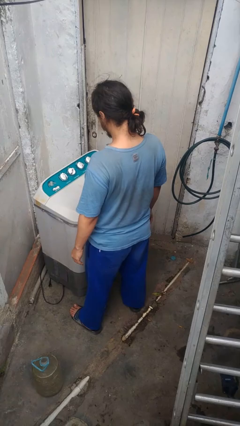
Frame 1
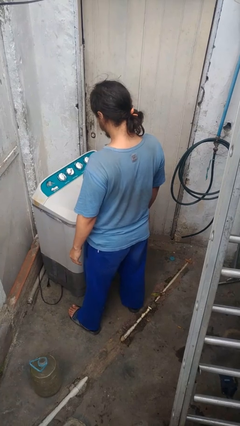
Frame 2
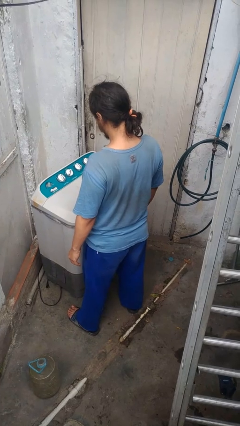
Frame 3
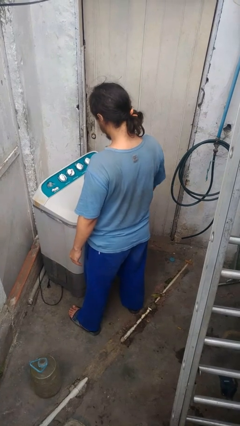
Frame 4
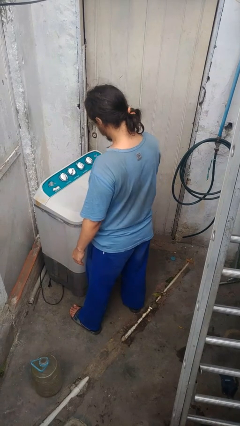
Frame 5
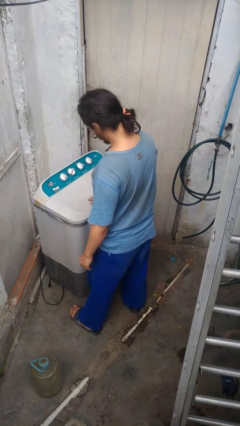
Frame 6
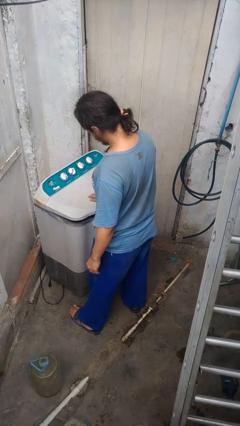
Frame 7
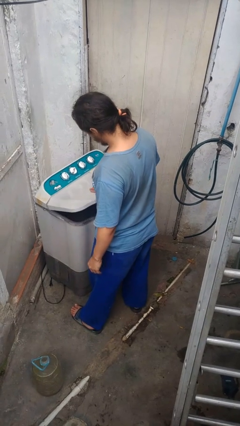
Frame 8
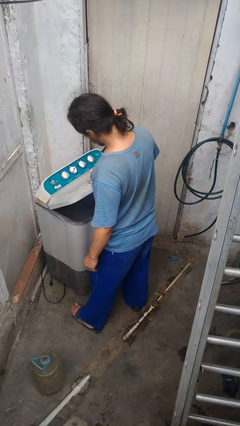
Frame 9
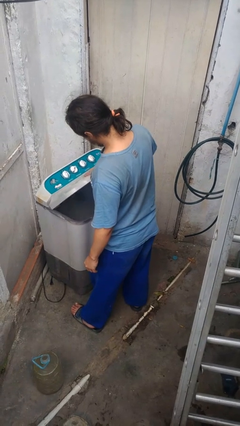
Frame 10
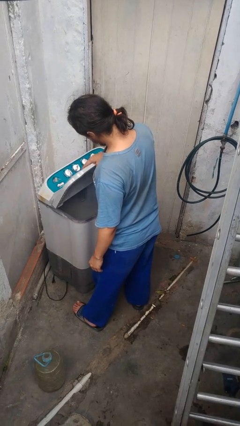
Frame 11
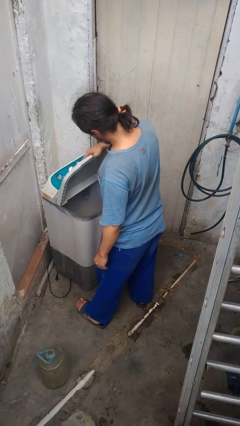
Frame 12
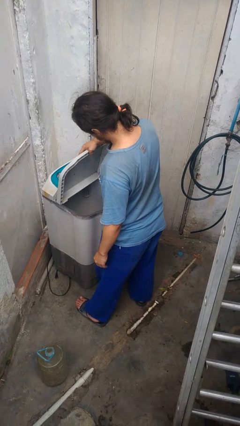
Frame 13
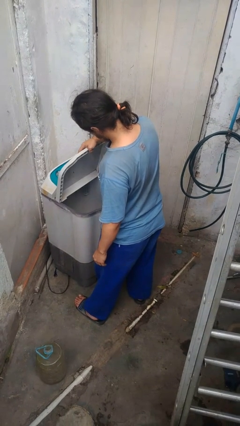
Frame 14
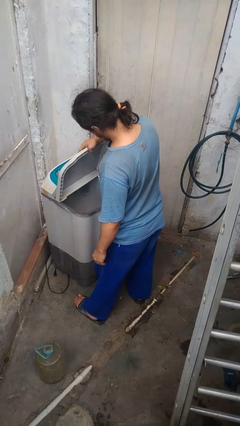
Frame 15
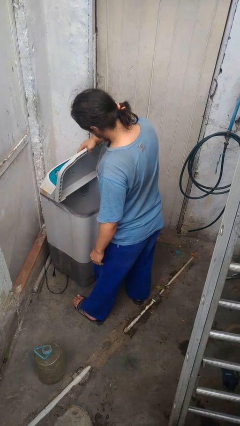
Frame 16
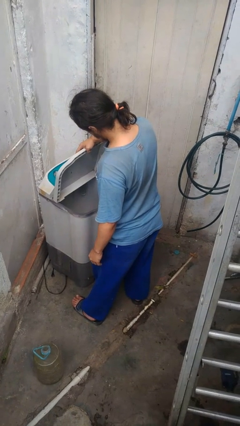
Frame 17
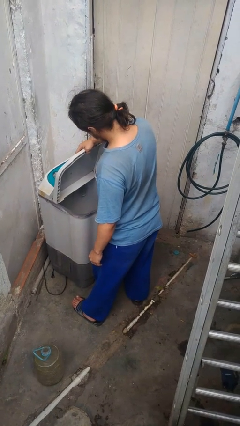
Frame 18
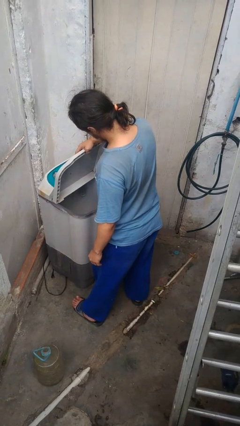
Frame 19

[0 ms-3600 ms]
person opens clothes washer

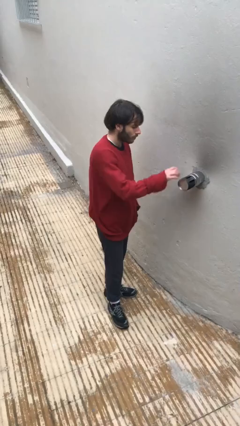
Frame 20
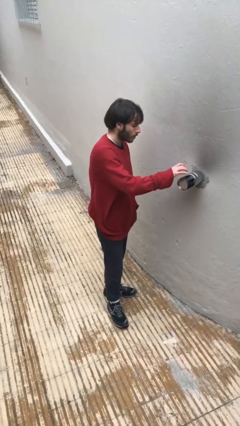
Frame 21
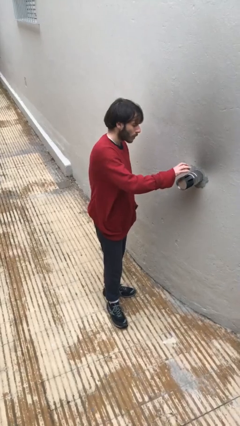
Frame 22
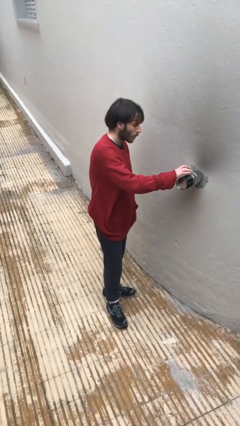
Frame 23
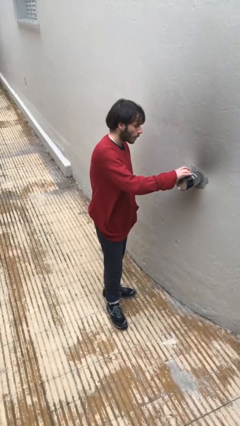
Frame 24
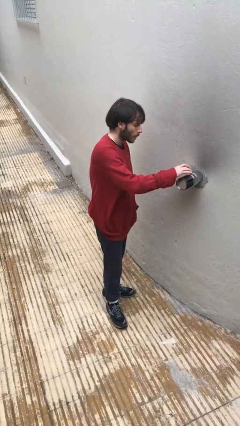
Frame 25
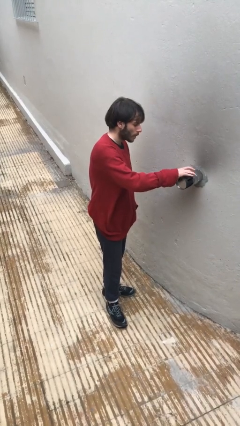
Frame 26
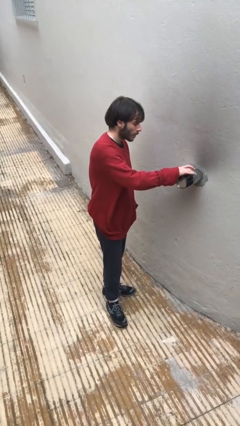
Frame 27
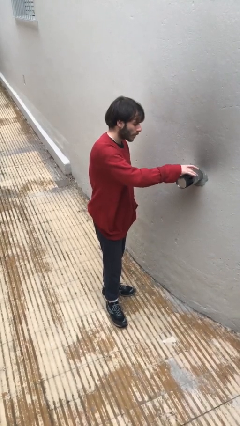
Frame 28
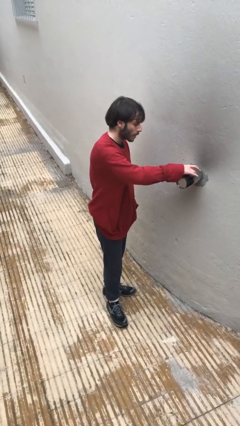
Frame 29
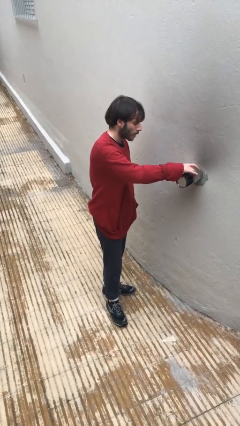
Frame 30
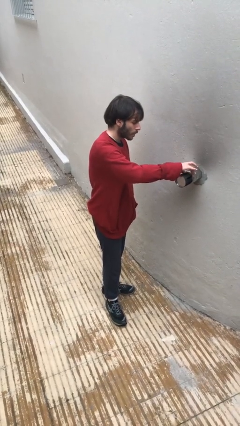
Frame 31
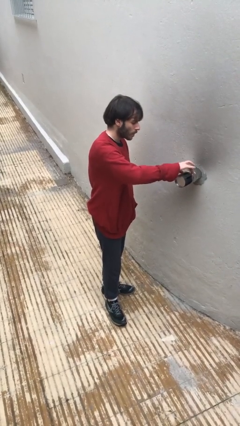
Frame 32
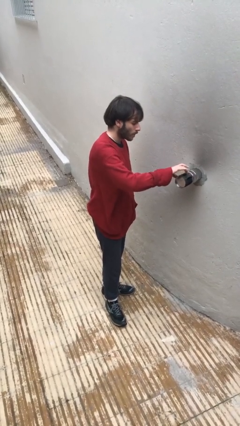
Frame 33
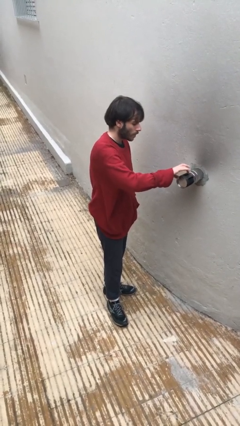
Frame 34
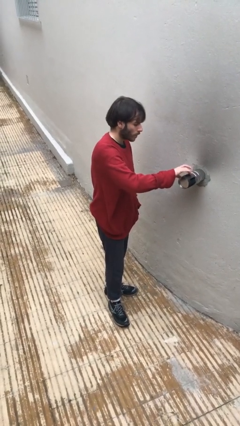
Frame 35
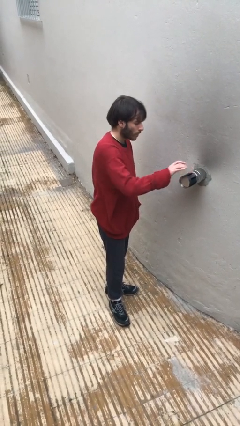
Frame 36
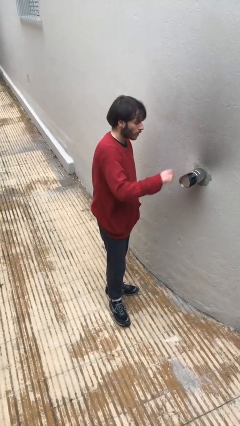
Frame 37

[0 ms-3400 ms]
person taps object with finger

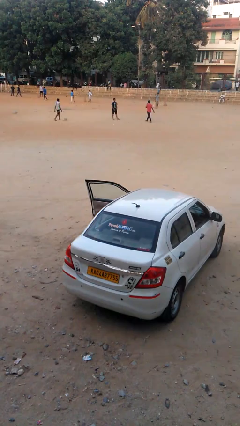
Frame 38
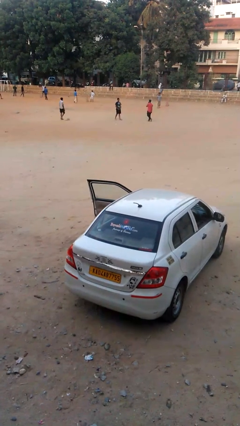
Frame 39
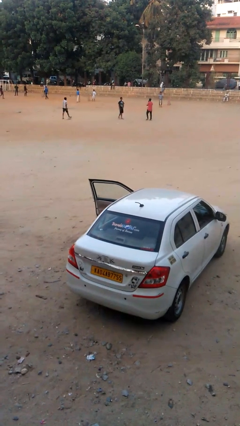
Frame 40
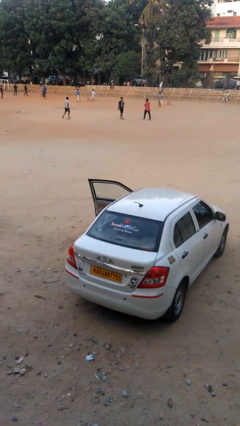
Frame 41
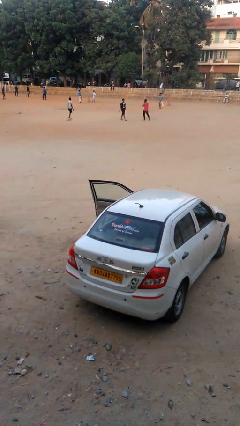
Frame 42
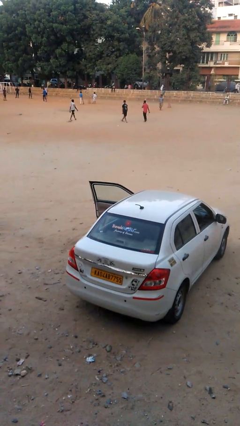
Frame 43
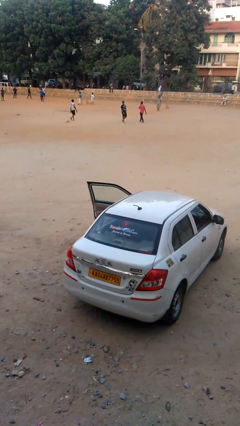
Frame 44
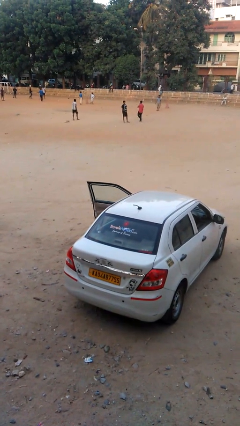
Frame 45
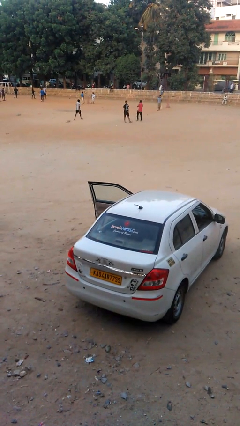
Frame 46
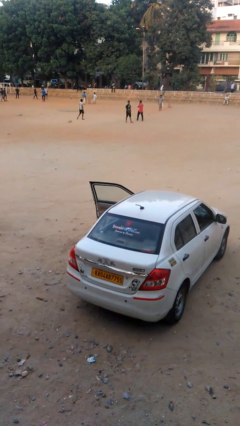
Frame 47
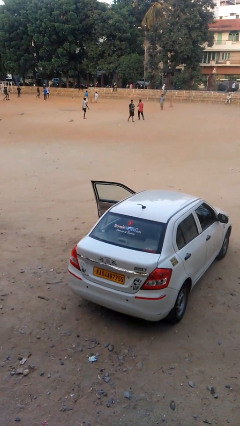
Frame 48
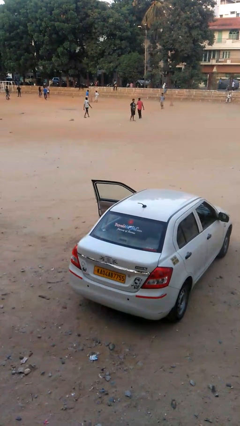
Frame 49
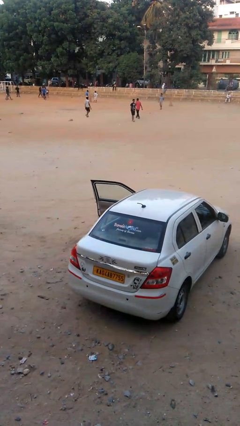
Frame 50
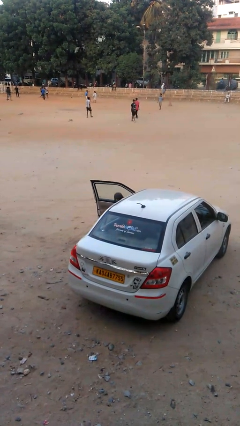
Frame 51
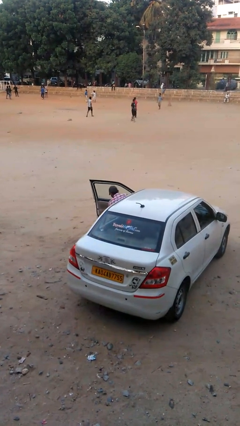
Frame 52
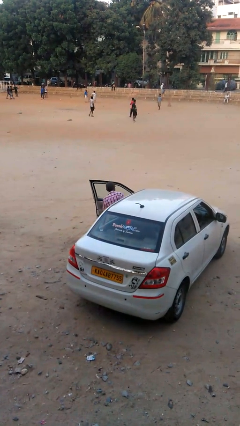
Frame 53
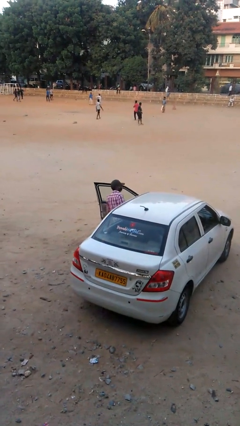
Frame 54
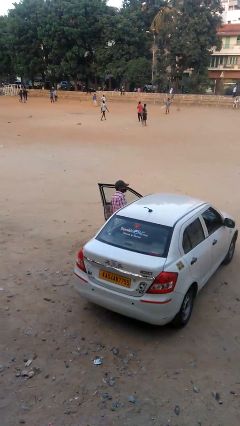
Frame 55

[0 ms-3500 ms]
person exits car

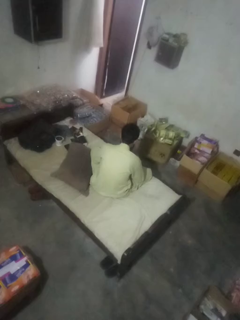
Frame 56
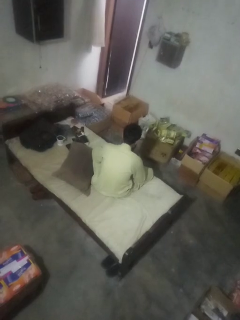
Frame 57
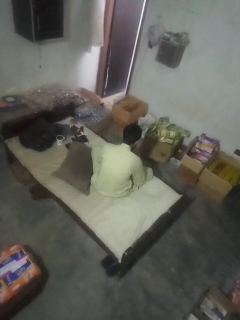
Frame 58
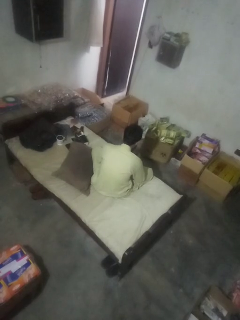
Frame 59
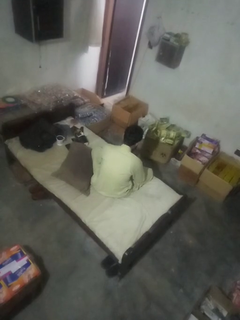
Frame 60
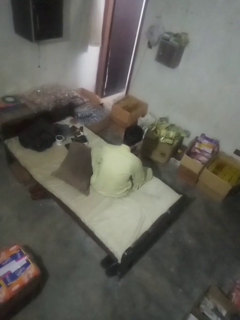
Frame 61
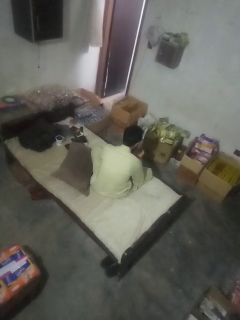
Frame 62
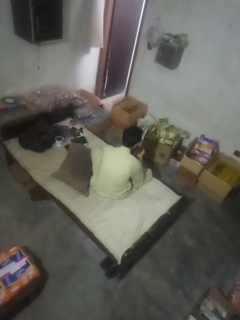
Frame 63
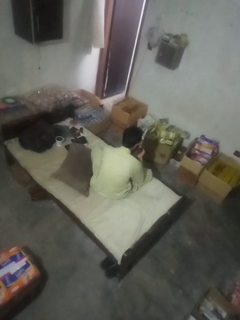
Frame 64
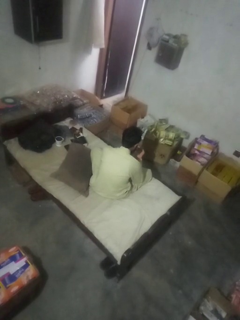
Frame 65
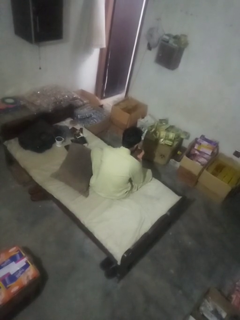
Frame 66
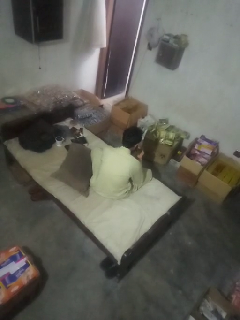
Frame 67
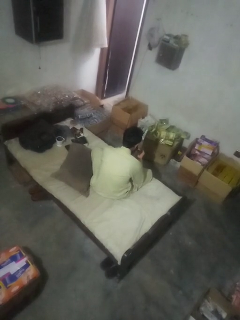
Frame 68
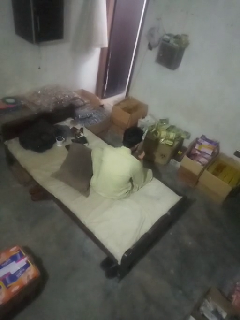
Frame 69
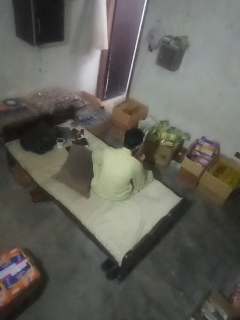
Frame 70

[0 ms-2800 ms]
person paints fingernails

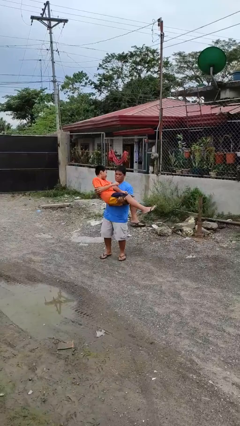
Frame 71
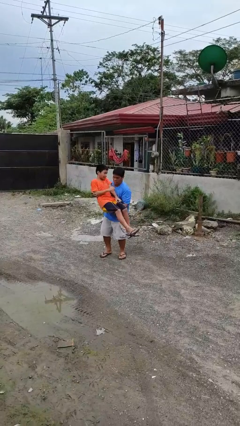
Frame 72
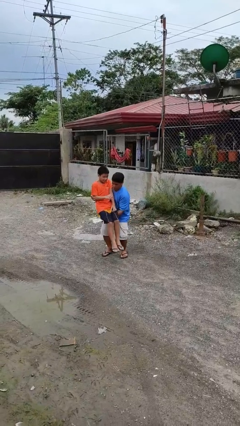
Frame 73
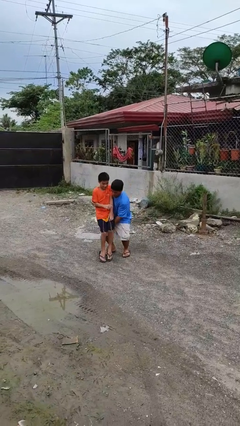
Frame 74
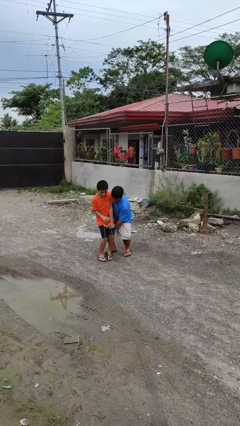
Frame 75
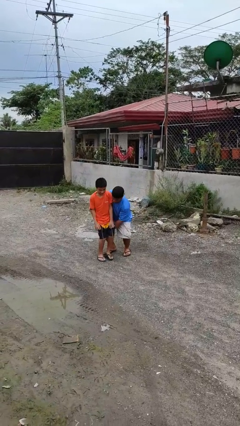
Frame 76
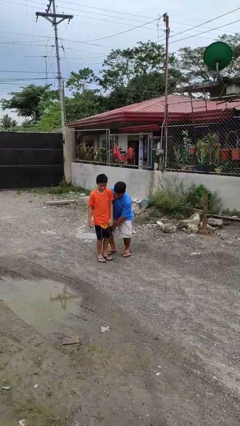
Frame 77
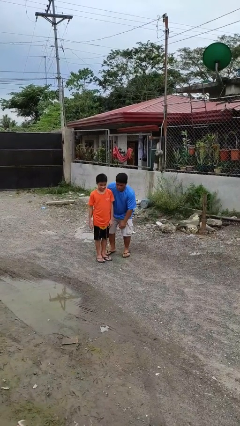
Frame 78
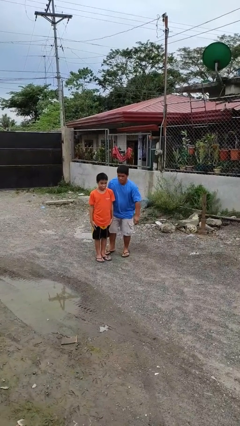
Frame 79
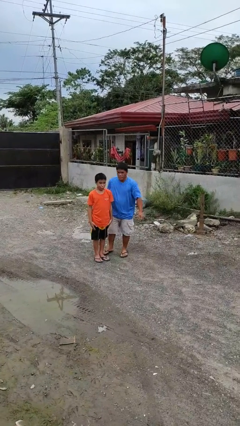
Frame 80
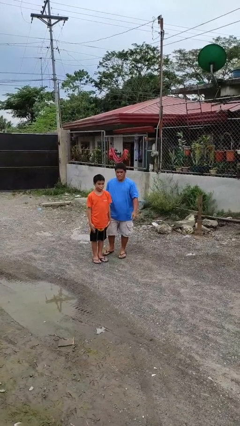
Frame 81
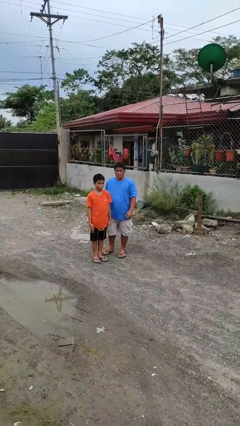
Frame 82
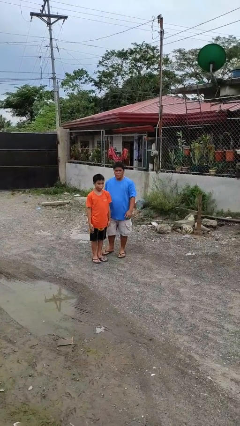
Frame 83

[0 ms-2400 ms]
person puts down person

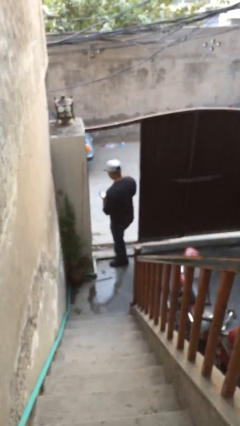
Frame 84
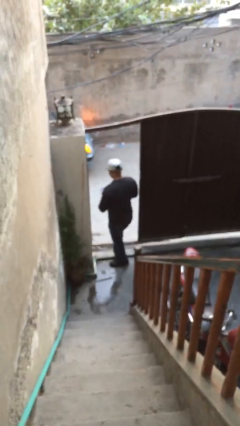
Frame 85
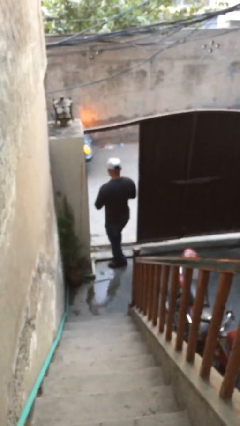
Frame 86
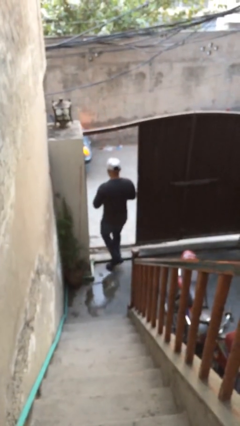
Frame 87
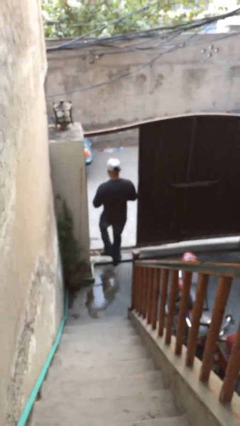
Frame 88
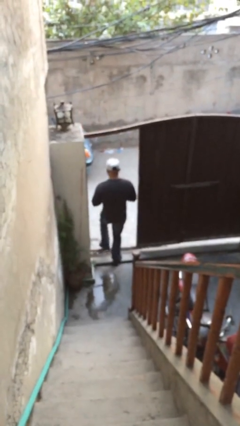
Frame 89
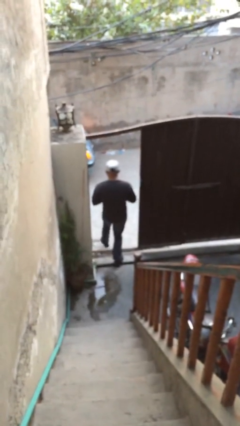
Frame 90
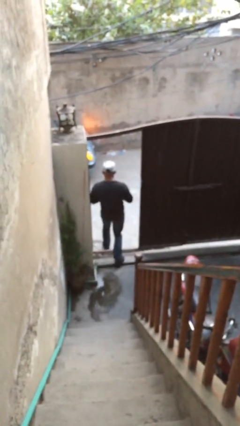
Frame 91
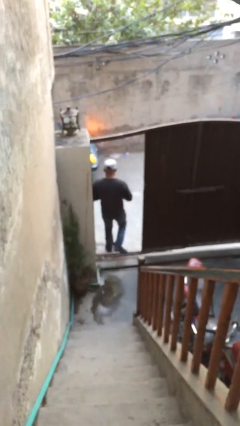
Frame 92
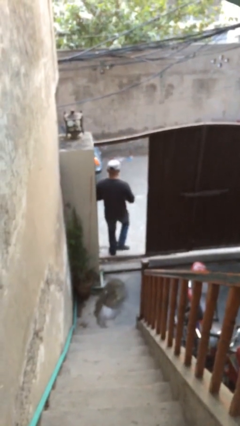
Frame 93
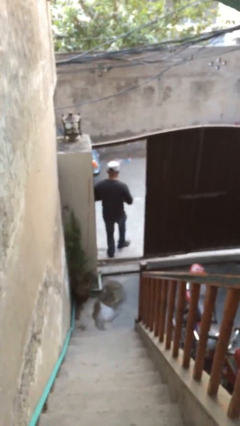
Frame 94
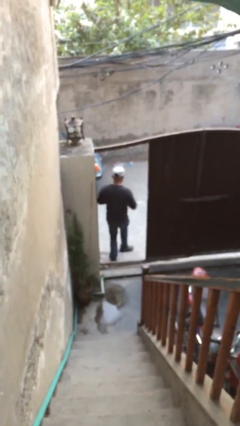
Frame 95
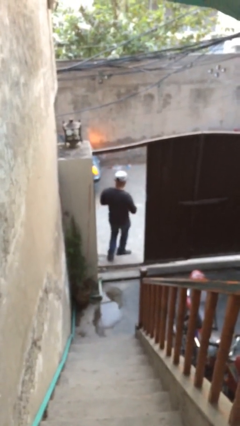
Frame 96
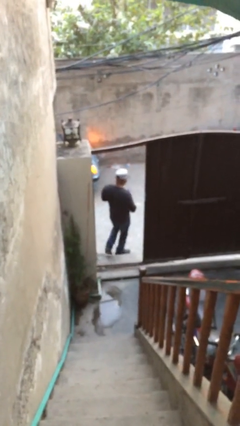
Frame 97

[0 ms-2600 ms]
person exits scene through structure
